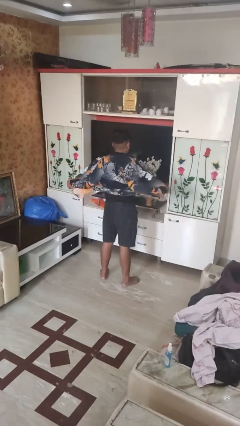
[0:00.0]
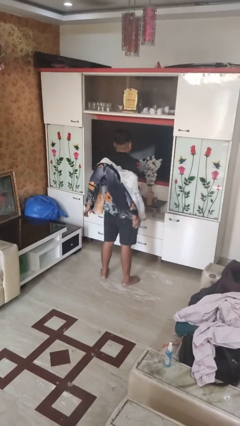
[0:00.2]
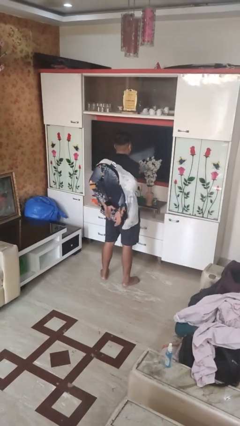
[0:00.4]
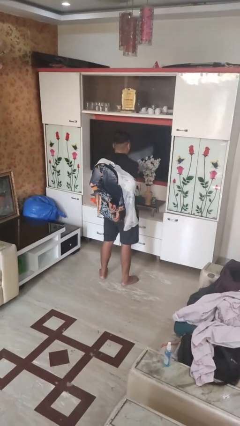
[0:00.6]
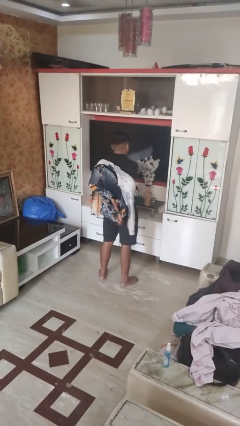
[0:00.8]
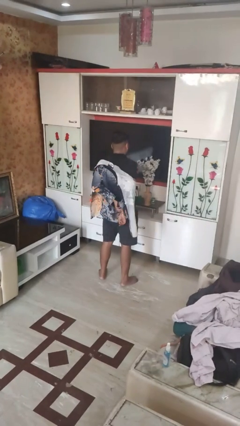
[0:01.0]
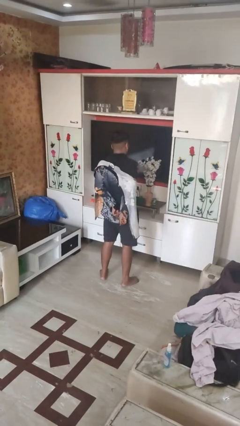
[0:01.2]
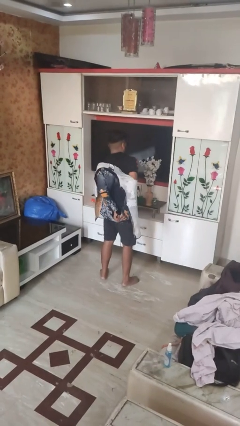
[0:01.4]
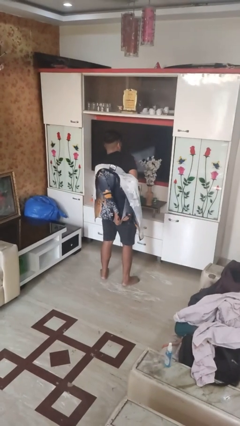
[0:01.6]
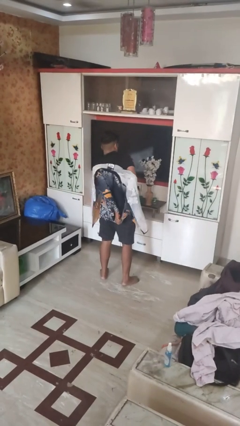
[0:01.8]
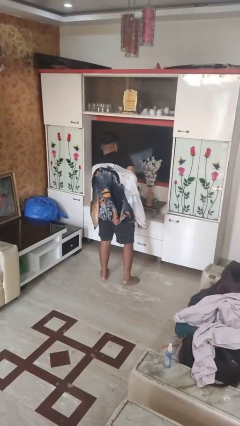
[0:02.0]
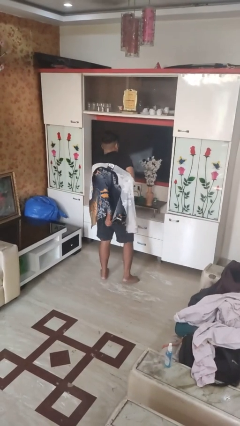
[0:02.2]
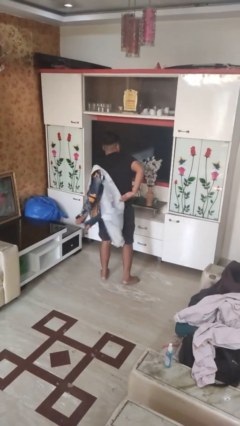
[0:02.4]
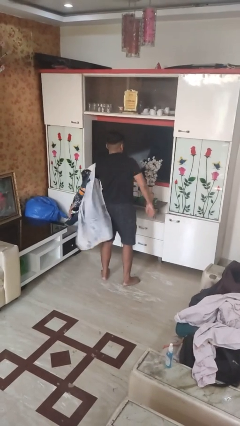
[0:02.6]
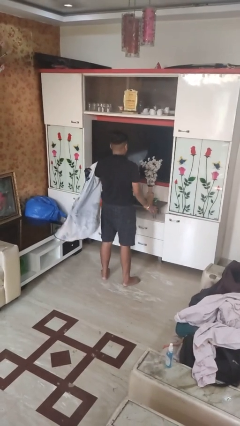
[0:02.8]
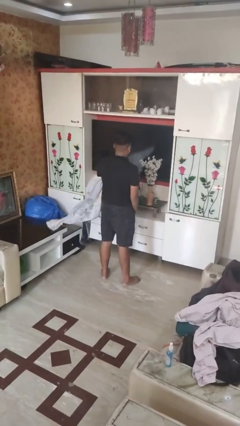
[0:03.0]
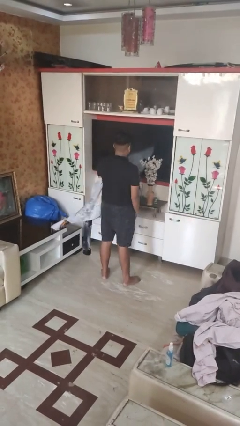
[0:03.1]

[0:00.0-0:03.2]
person takes off shirt

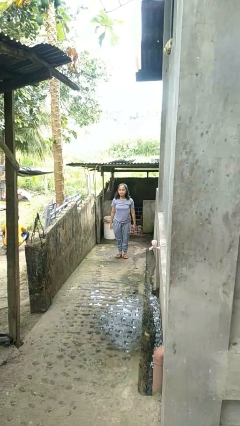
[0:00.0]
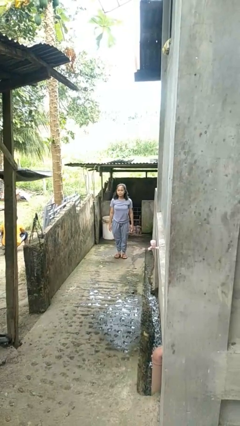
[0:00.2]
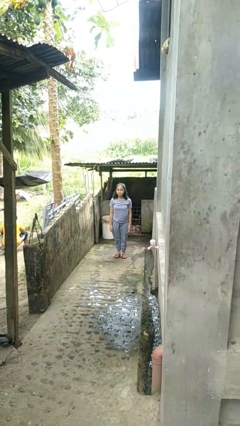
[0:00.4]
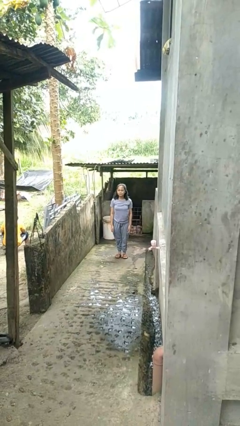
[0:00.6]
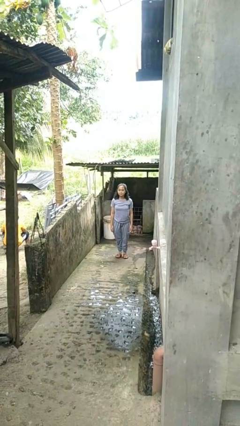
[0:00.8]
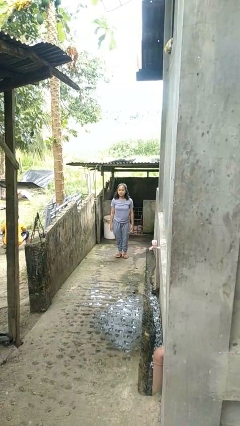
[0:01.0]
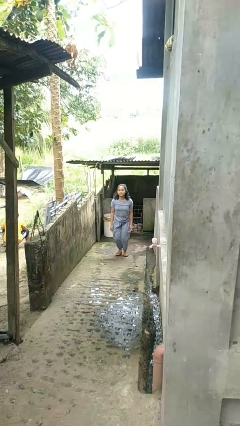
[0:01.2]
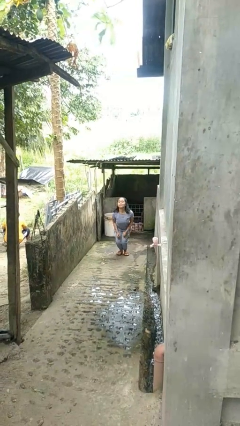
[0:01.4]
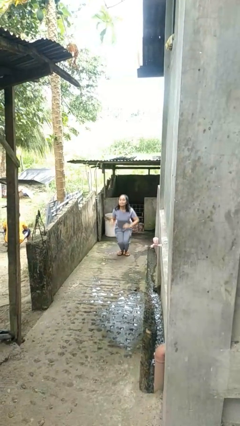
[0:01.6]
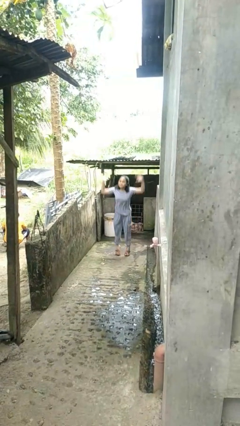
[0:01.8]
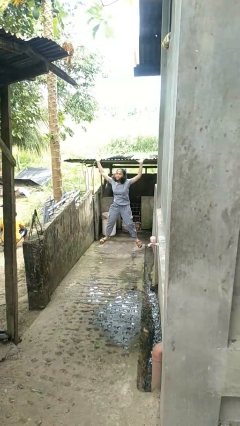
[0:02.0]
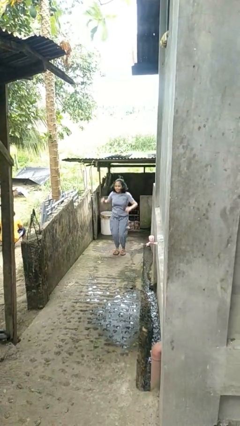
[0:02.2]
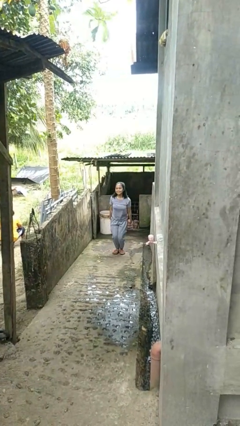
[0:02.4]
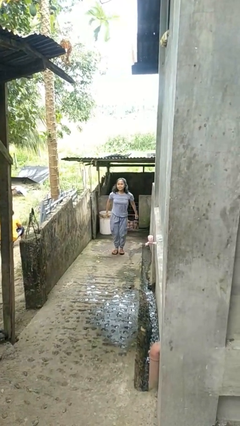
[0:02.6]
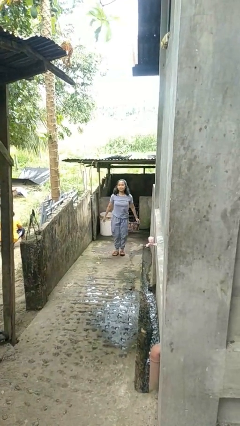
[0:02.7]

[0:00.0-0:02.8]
person exercises with jumping jacks

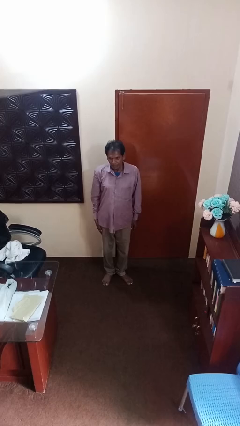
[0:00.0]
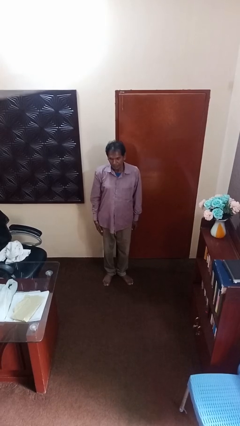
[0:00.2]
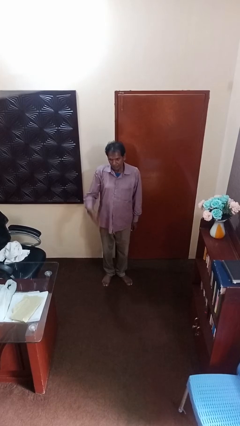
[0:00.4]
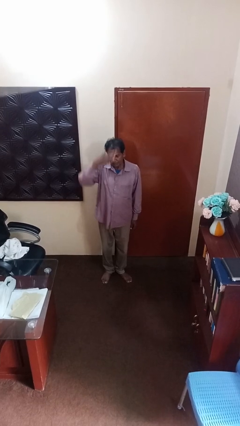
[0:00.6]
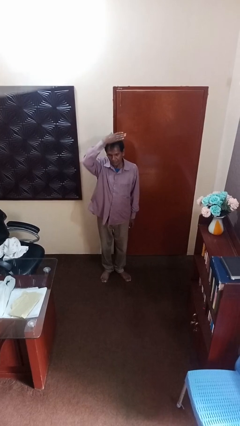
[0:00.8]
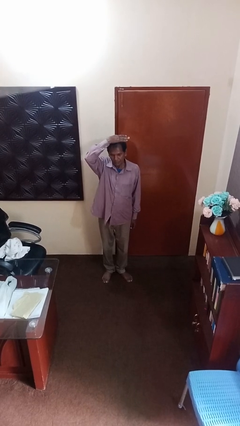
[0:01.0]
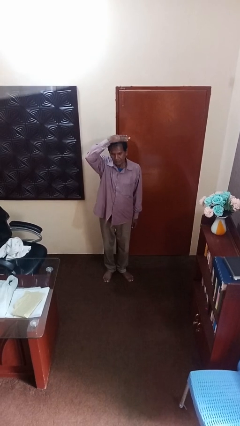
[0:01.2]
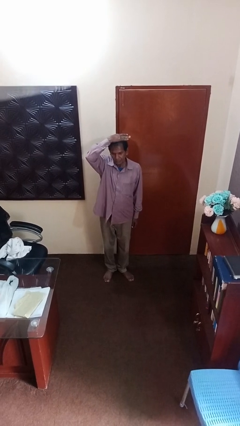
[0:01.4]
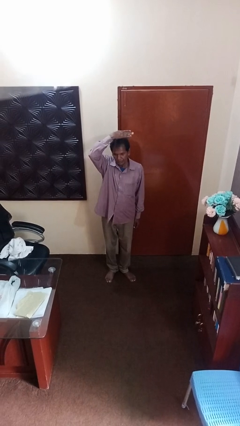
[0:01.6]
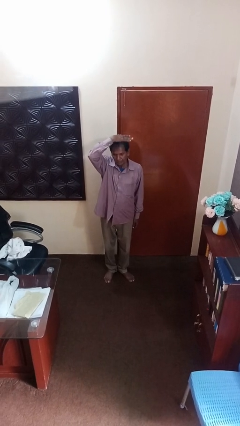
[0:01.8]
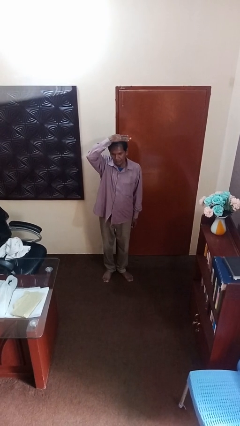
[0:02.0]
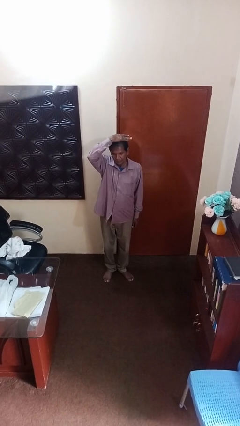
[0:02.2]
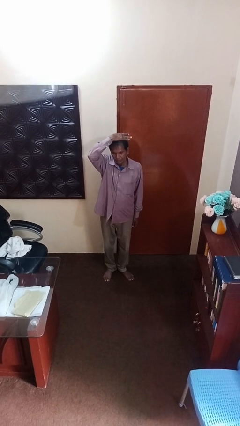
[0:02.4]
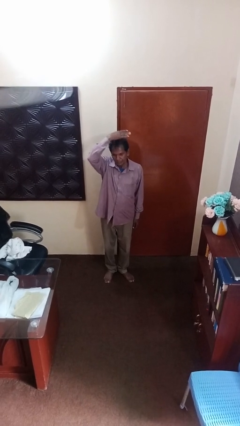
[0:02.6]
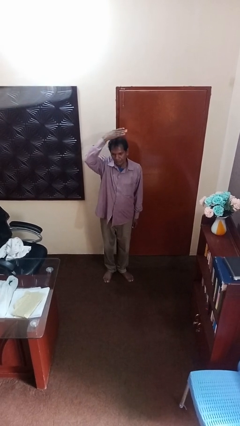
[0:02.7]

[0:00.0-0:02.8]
person pats head

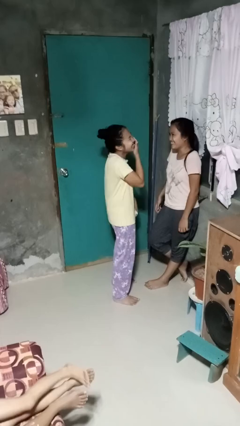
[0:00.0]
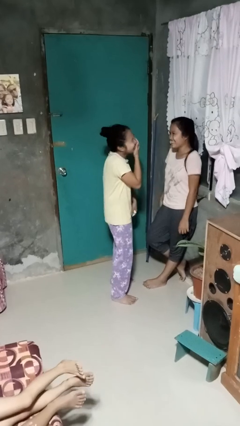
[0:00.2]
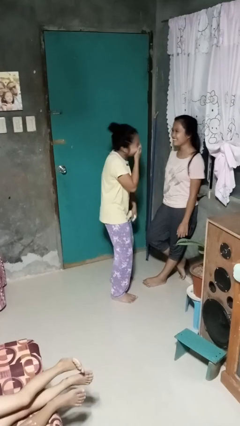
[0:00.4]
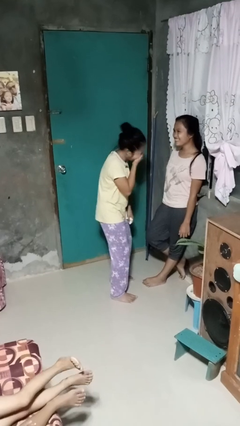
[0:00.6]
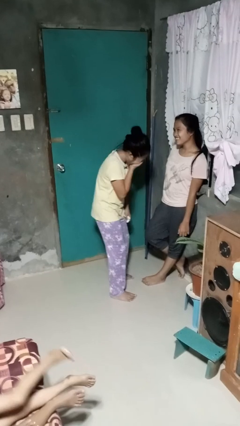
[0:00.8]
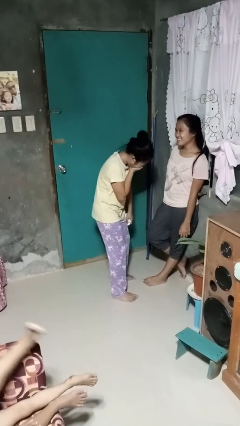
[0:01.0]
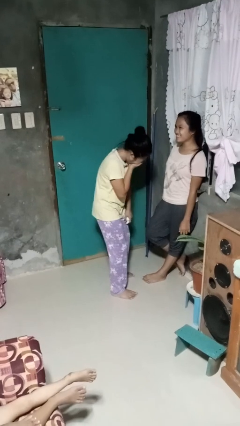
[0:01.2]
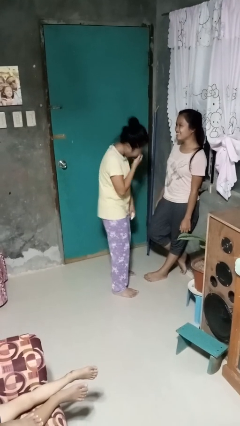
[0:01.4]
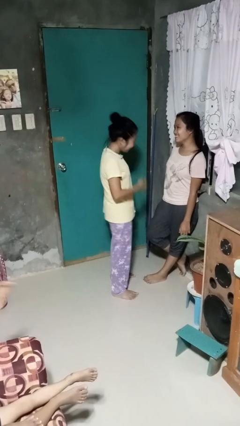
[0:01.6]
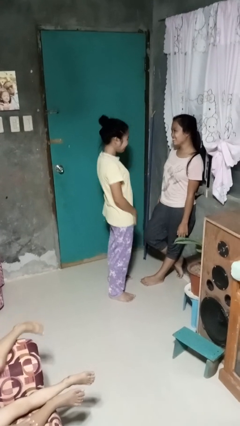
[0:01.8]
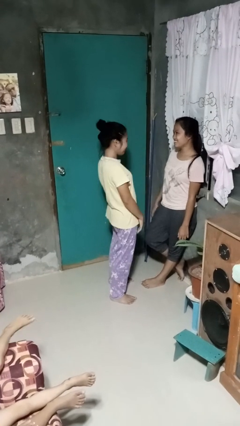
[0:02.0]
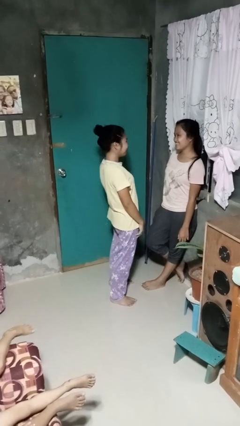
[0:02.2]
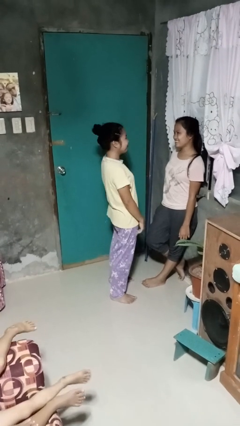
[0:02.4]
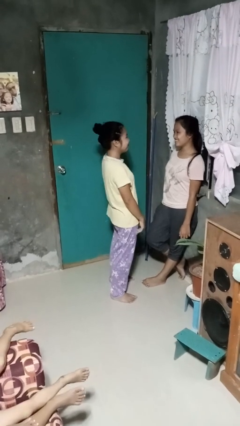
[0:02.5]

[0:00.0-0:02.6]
person laughs with person

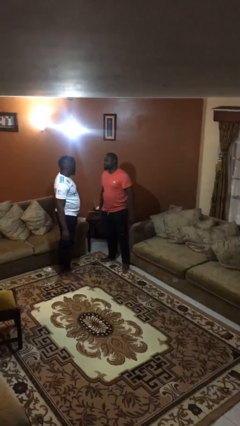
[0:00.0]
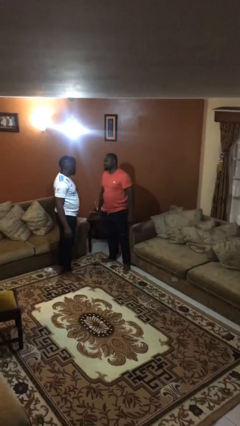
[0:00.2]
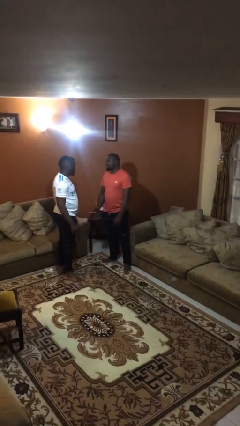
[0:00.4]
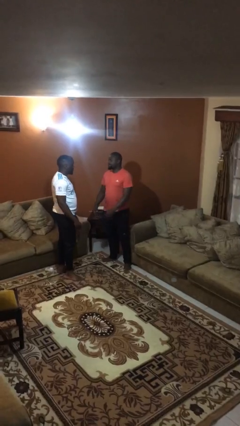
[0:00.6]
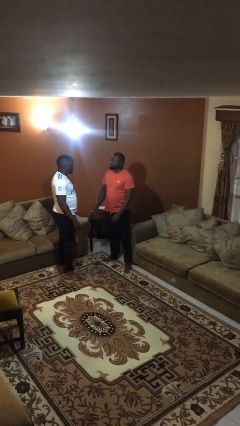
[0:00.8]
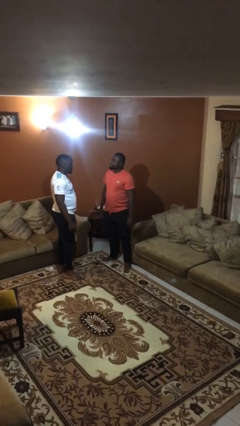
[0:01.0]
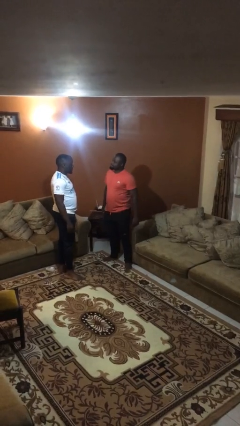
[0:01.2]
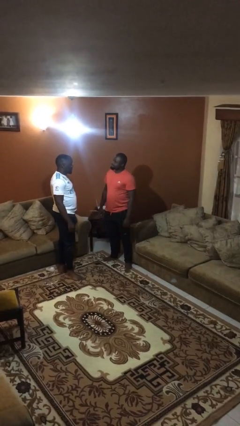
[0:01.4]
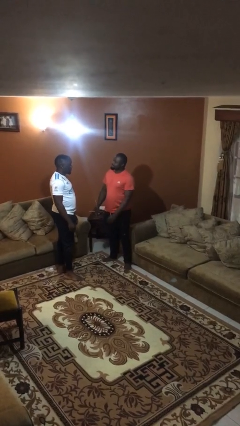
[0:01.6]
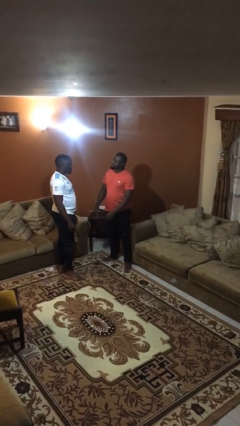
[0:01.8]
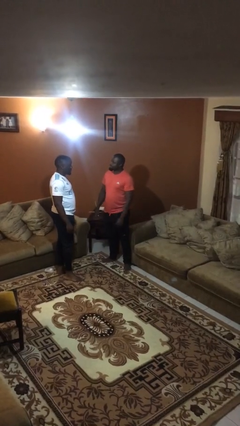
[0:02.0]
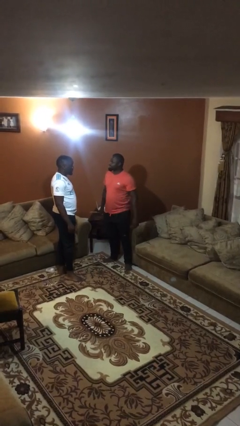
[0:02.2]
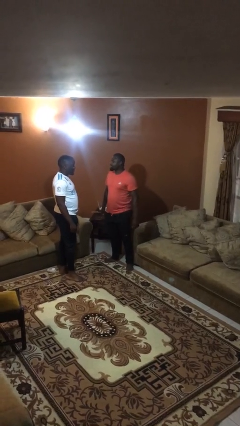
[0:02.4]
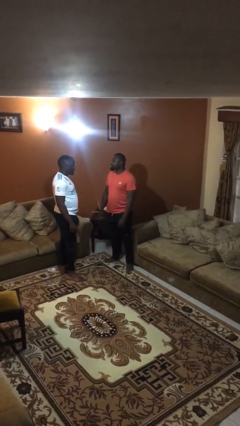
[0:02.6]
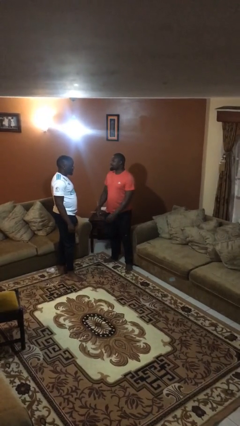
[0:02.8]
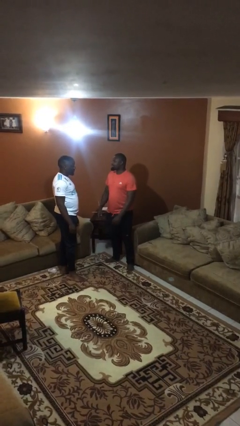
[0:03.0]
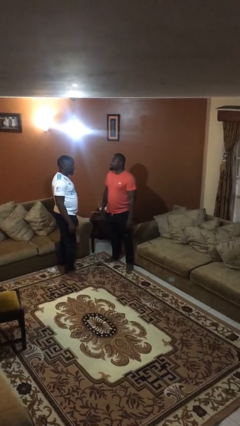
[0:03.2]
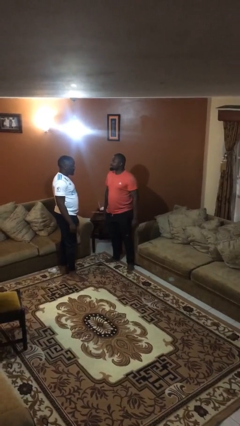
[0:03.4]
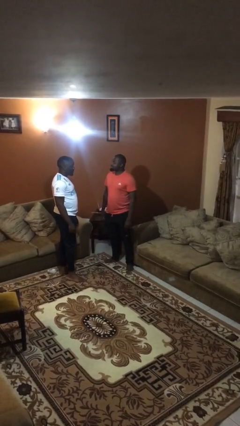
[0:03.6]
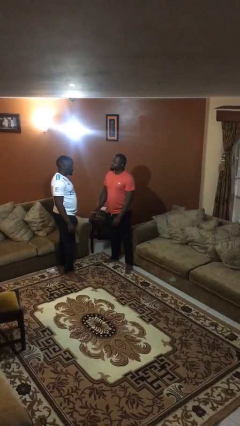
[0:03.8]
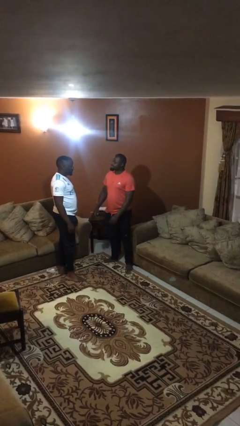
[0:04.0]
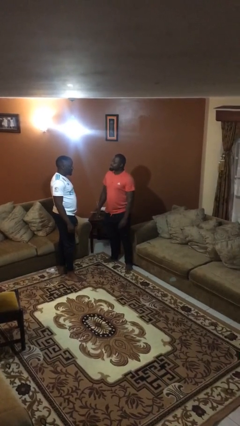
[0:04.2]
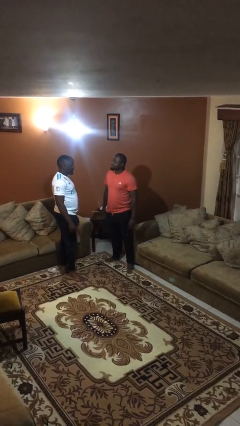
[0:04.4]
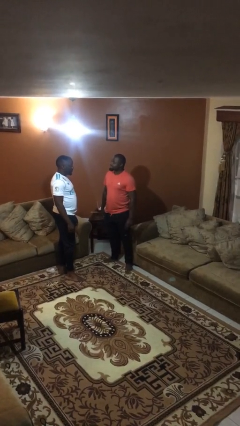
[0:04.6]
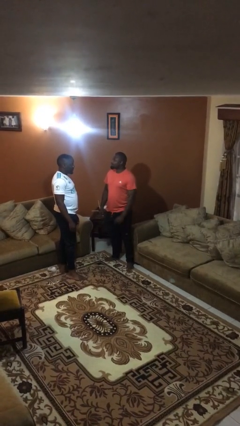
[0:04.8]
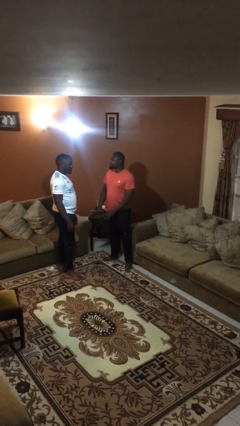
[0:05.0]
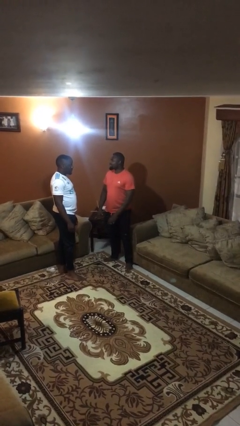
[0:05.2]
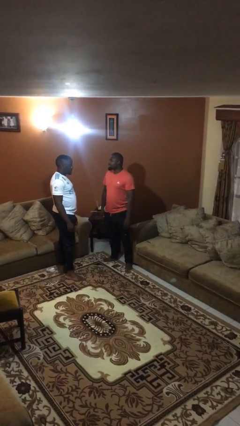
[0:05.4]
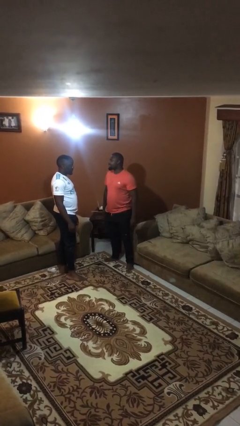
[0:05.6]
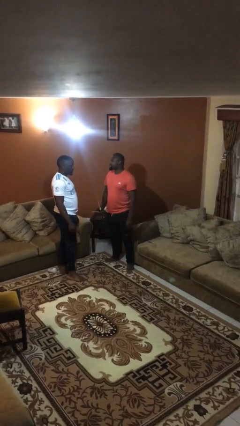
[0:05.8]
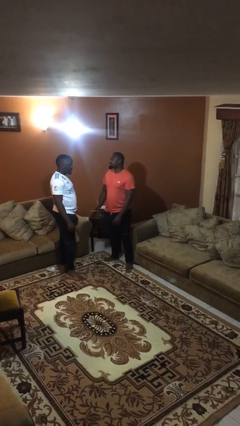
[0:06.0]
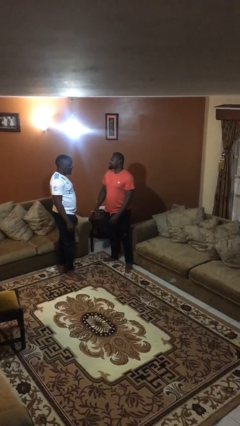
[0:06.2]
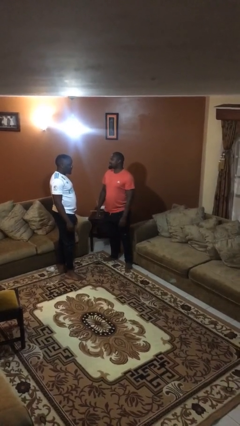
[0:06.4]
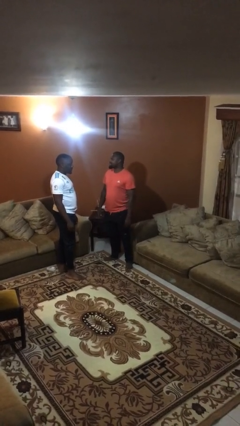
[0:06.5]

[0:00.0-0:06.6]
person talks to person
